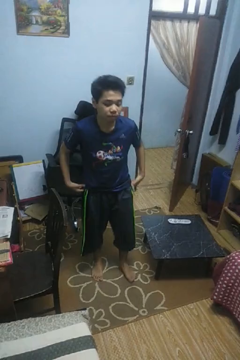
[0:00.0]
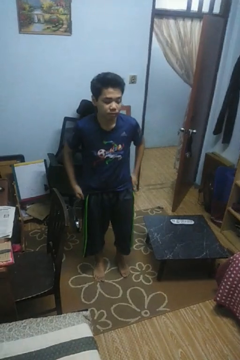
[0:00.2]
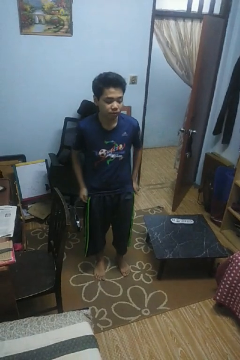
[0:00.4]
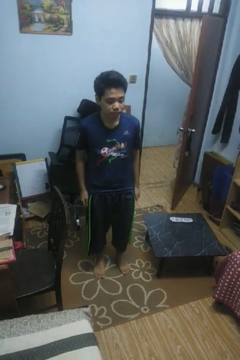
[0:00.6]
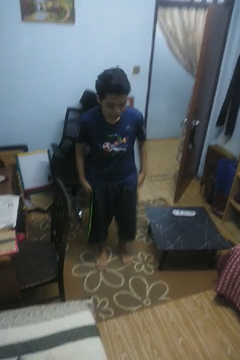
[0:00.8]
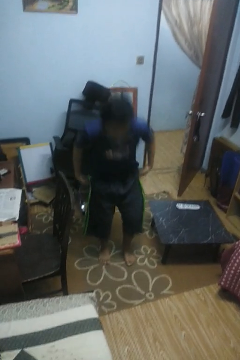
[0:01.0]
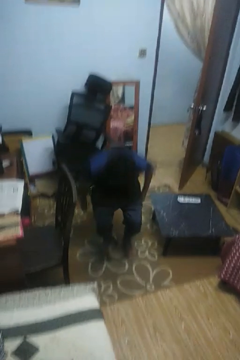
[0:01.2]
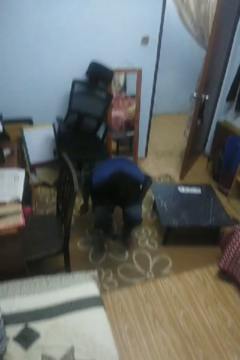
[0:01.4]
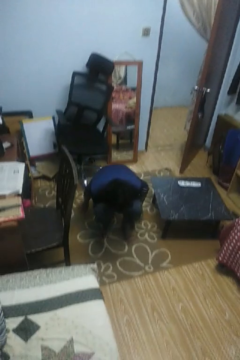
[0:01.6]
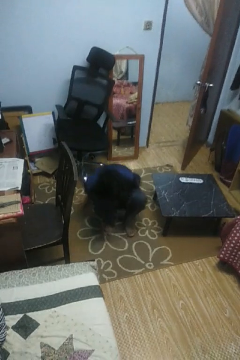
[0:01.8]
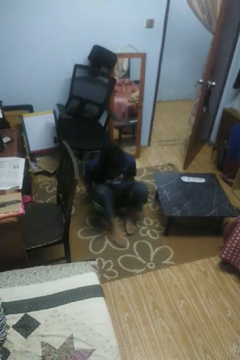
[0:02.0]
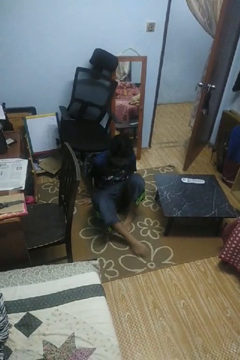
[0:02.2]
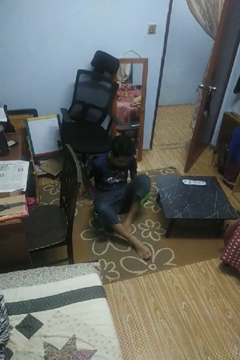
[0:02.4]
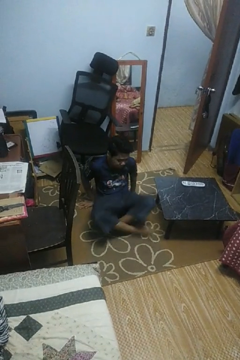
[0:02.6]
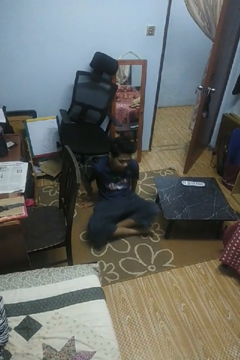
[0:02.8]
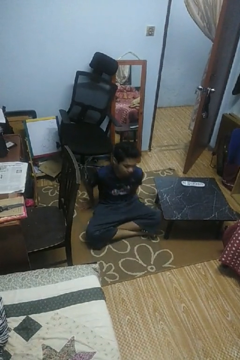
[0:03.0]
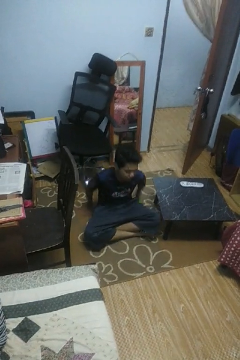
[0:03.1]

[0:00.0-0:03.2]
person sits crisscross

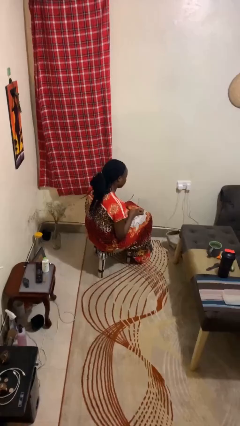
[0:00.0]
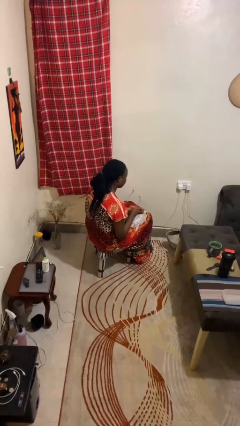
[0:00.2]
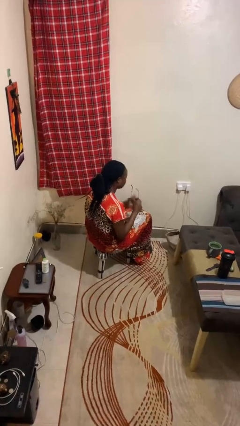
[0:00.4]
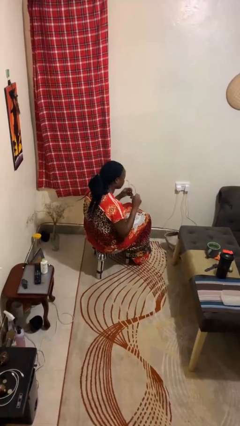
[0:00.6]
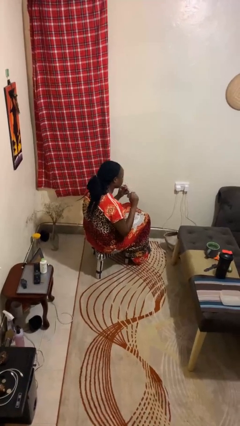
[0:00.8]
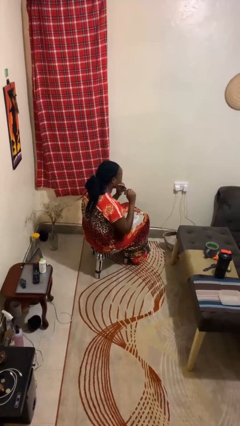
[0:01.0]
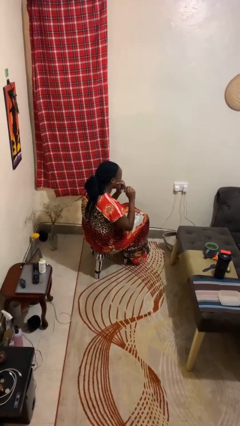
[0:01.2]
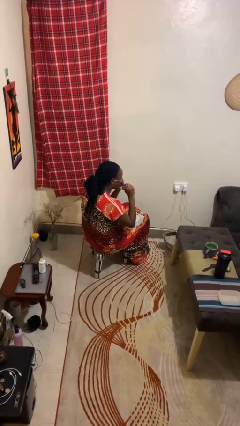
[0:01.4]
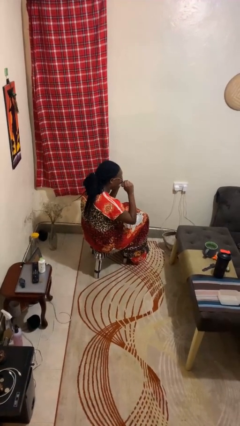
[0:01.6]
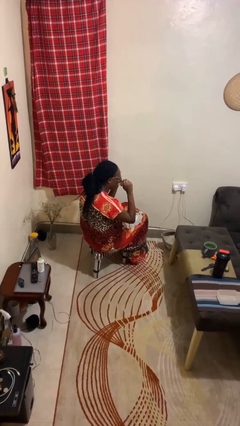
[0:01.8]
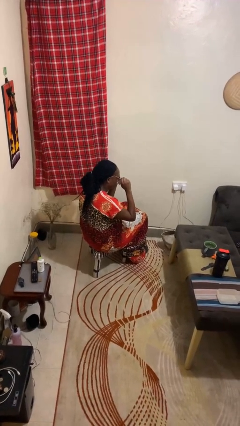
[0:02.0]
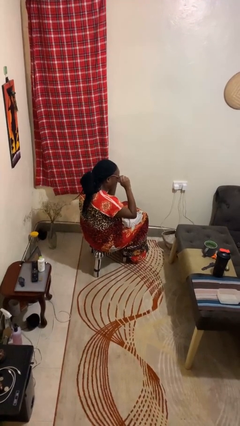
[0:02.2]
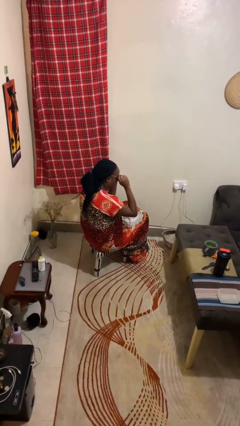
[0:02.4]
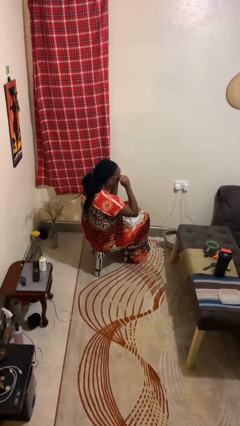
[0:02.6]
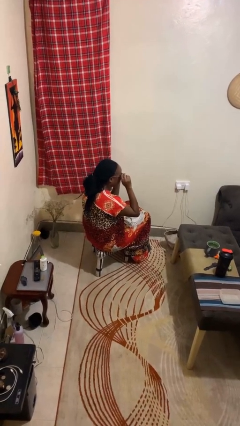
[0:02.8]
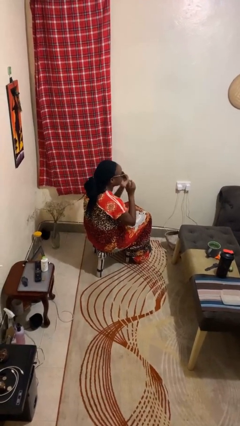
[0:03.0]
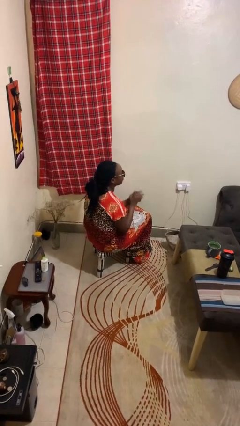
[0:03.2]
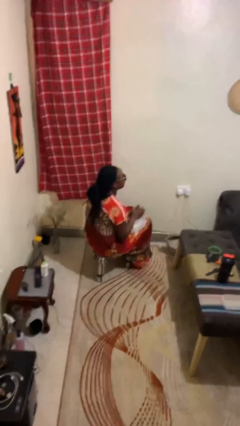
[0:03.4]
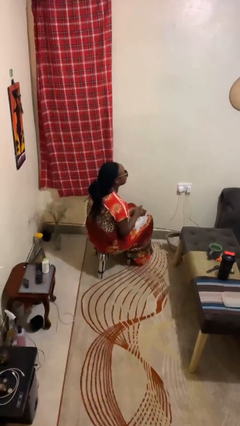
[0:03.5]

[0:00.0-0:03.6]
person puts on sunglasses

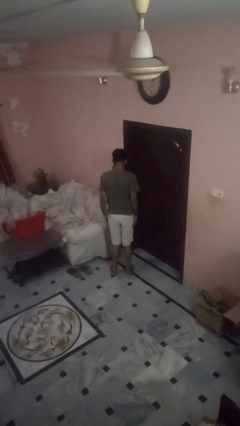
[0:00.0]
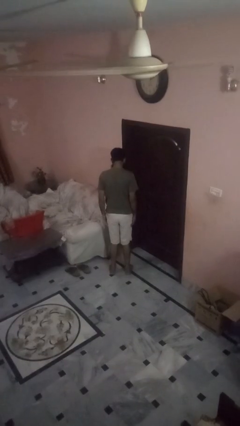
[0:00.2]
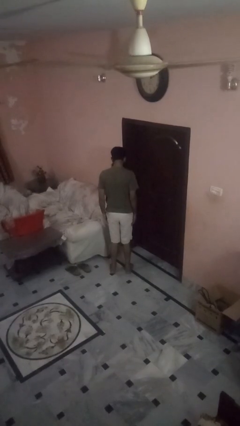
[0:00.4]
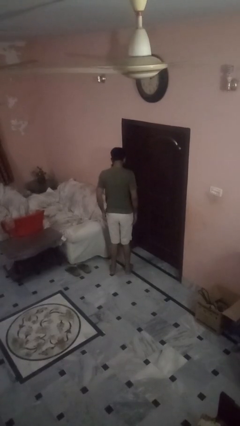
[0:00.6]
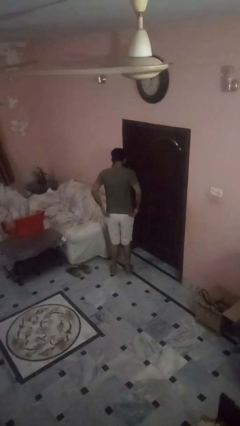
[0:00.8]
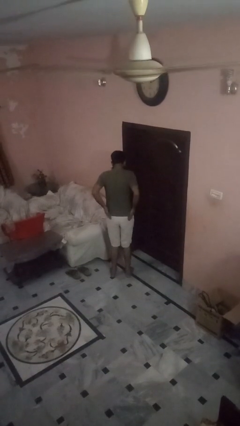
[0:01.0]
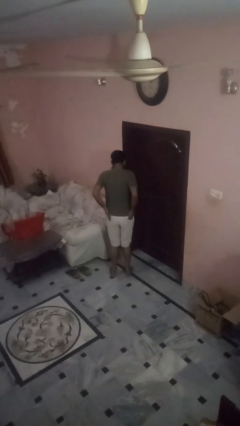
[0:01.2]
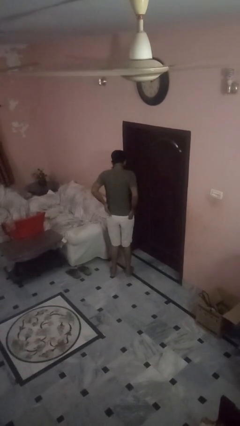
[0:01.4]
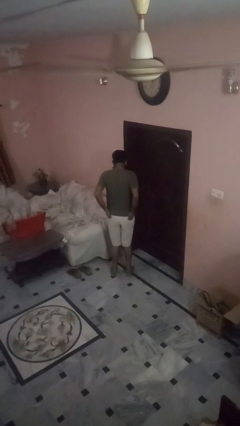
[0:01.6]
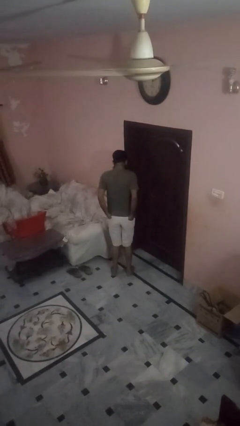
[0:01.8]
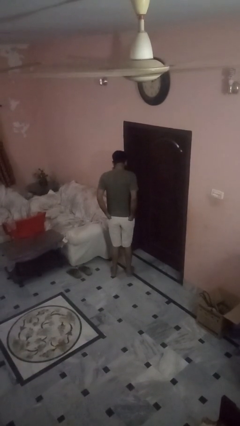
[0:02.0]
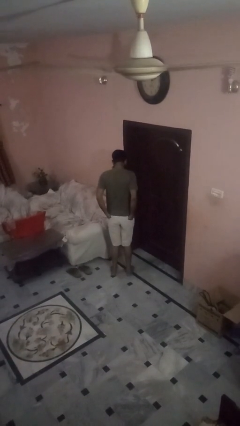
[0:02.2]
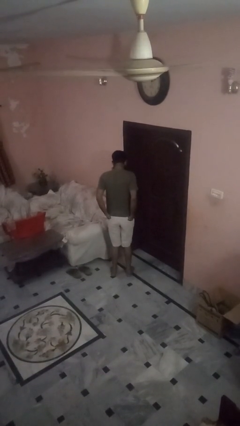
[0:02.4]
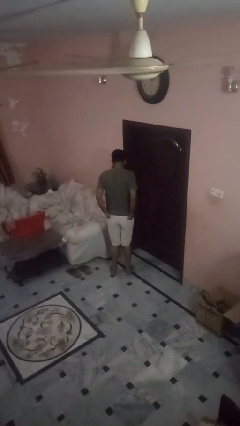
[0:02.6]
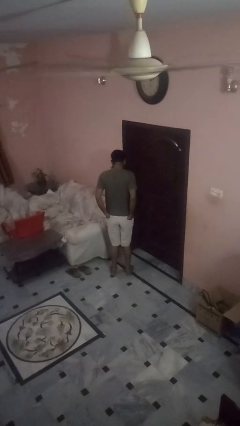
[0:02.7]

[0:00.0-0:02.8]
person puts hands in back pockets

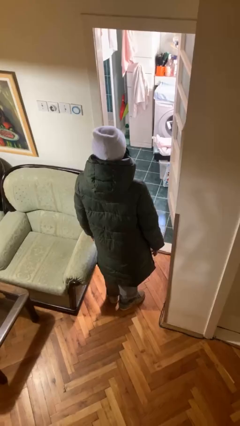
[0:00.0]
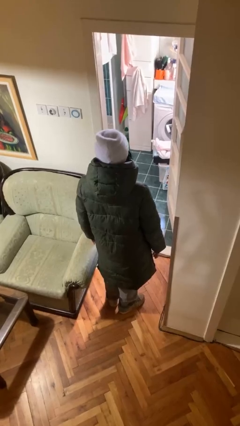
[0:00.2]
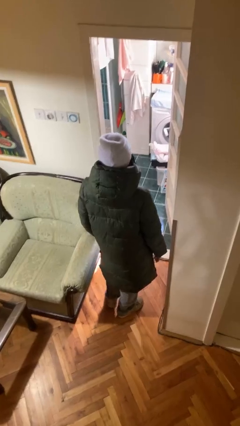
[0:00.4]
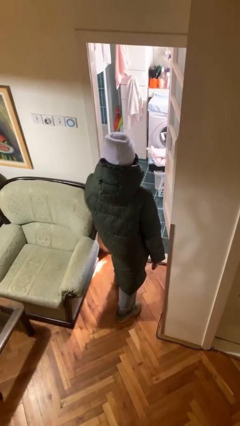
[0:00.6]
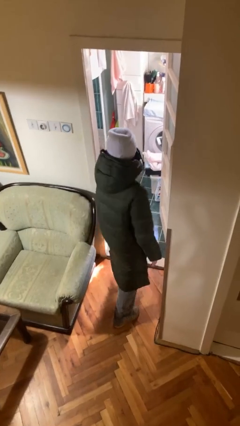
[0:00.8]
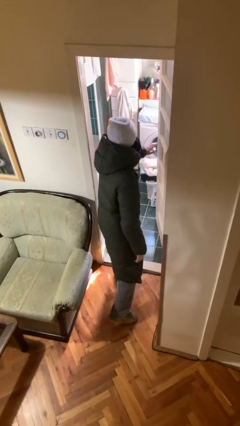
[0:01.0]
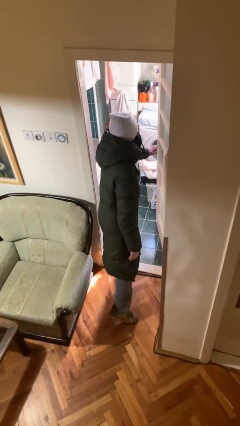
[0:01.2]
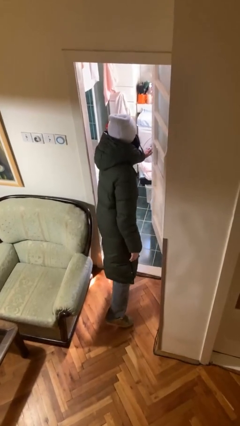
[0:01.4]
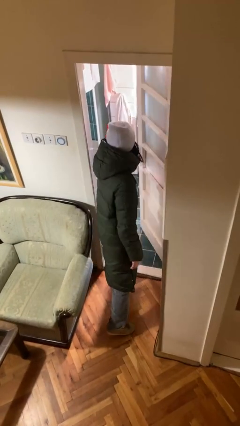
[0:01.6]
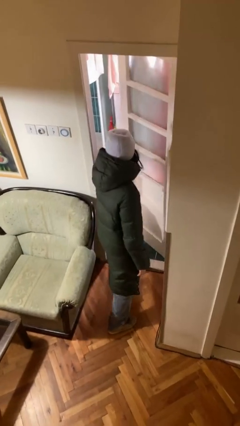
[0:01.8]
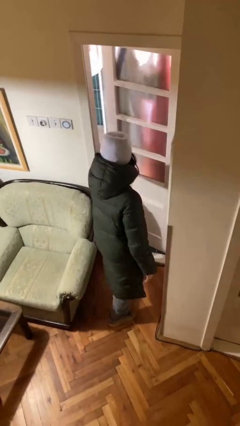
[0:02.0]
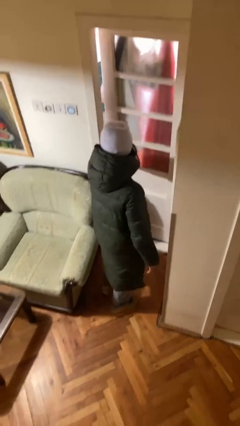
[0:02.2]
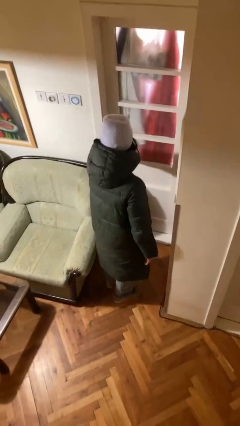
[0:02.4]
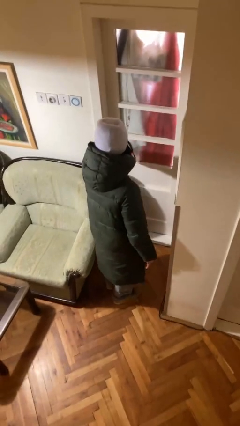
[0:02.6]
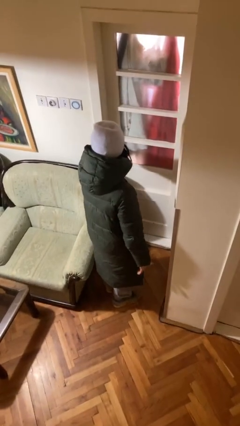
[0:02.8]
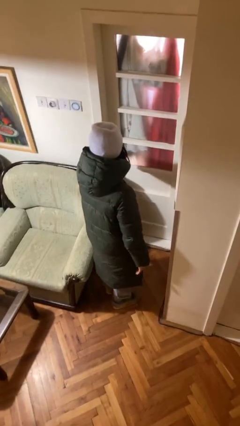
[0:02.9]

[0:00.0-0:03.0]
person closes facility door

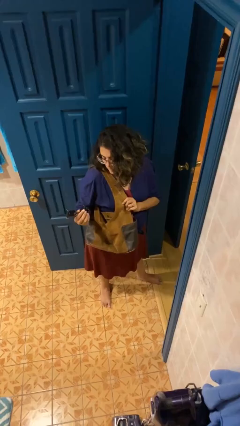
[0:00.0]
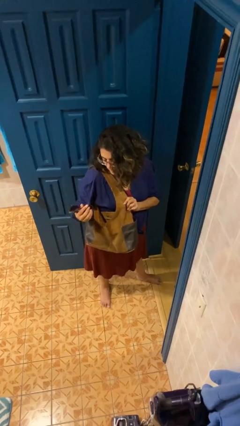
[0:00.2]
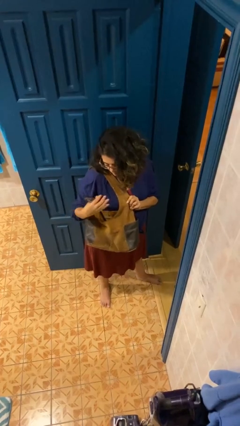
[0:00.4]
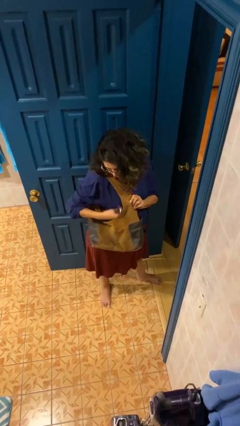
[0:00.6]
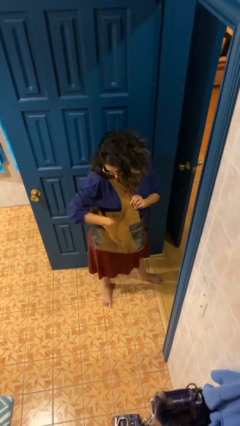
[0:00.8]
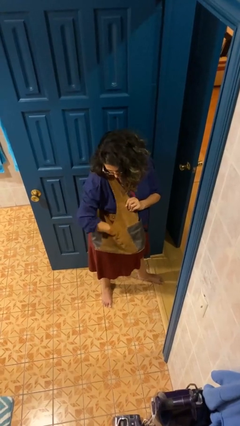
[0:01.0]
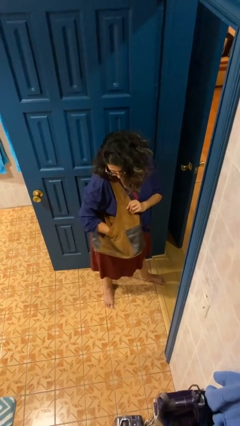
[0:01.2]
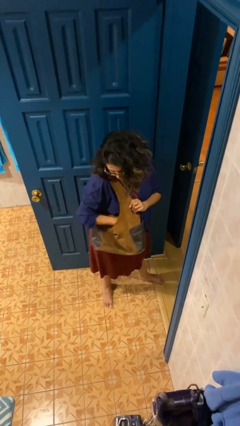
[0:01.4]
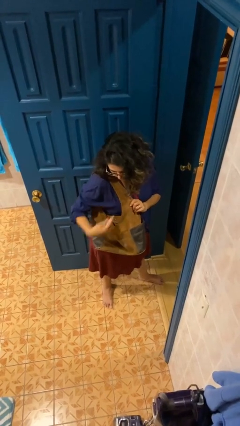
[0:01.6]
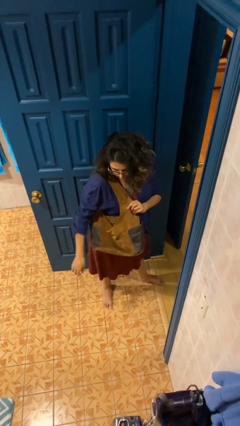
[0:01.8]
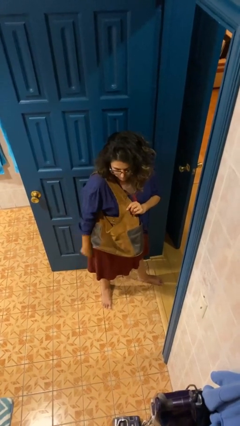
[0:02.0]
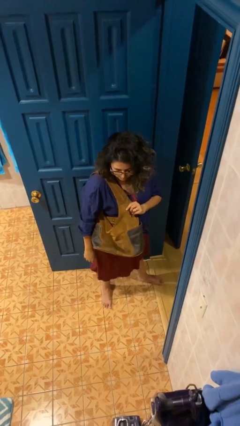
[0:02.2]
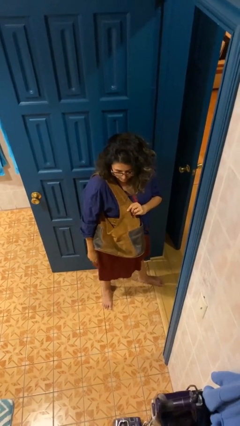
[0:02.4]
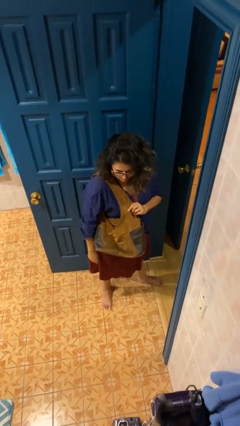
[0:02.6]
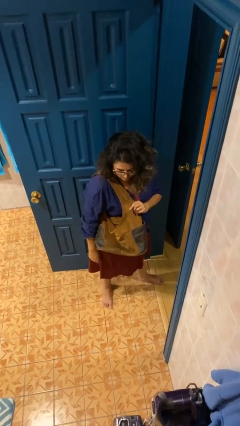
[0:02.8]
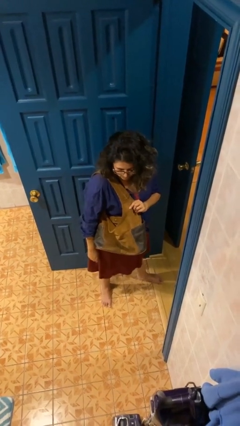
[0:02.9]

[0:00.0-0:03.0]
person puts object into purse

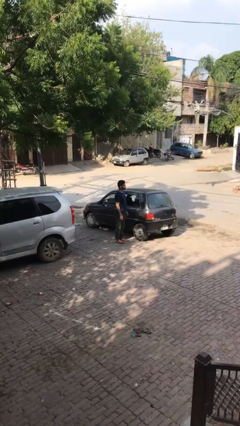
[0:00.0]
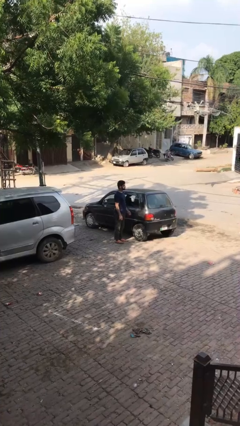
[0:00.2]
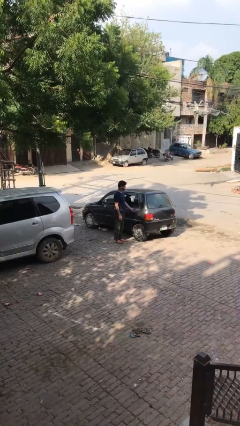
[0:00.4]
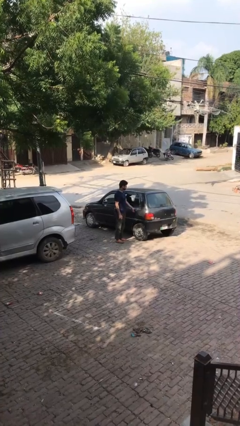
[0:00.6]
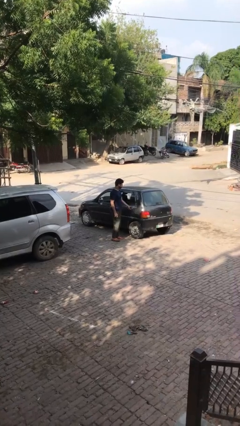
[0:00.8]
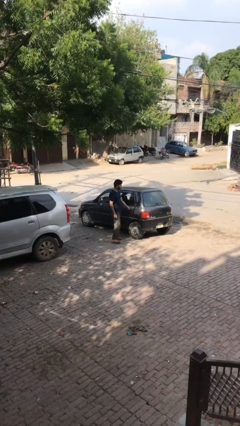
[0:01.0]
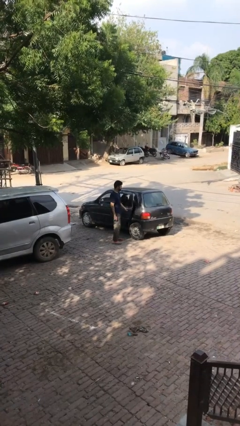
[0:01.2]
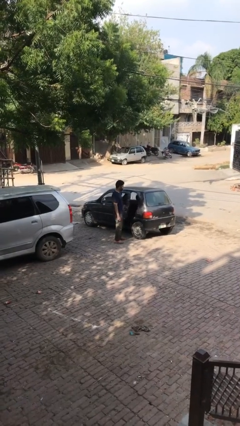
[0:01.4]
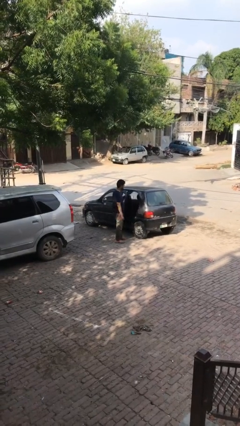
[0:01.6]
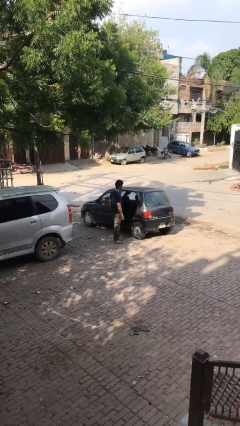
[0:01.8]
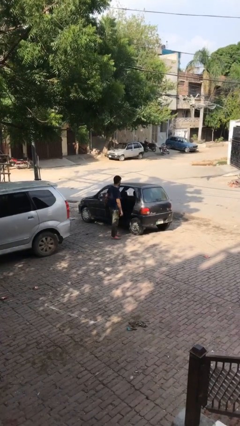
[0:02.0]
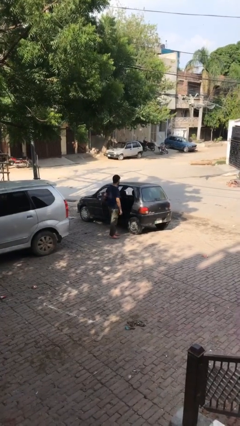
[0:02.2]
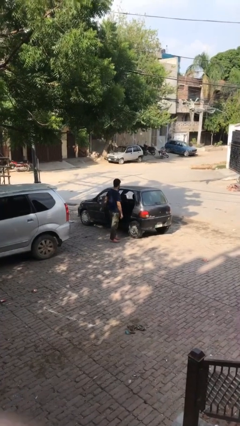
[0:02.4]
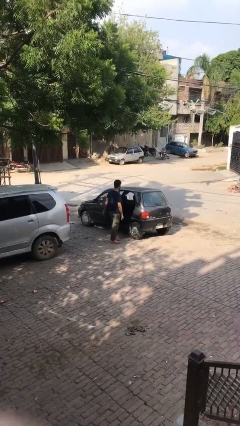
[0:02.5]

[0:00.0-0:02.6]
person opens car door
